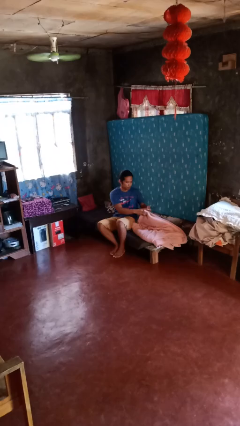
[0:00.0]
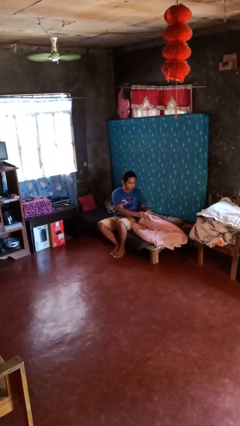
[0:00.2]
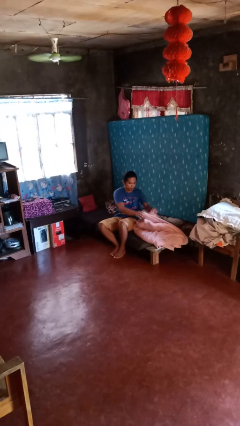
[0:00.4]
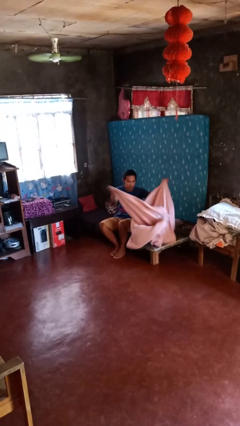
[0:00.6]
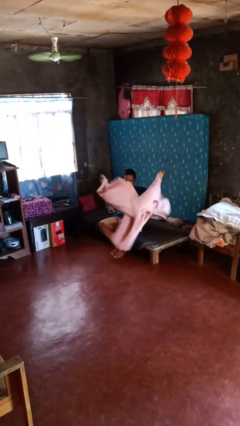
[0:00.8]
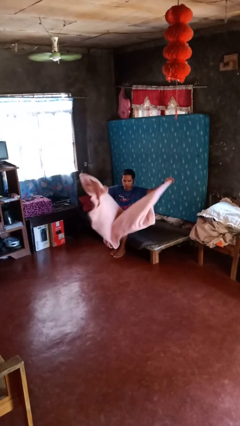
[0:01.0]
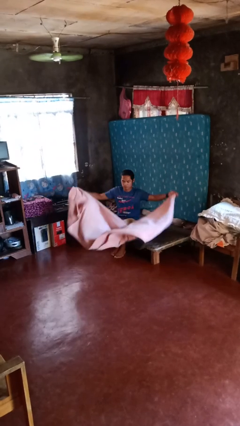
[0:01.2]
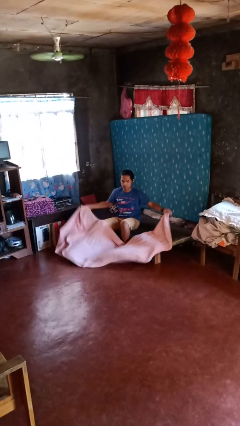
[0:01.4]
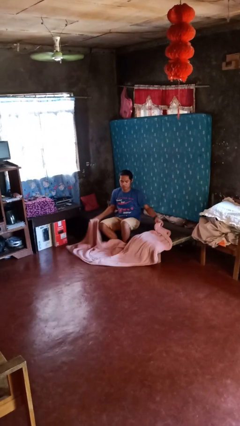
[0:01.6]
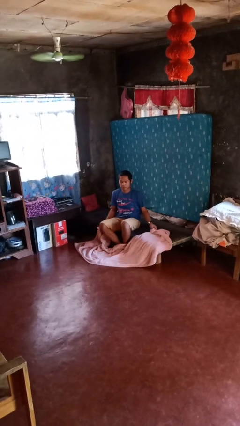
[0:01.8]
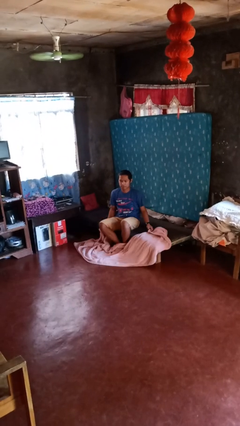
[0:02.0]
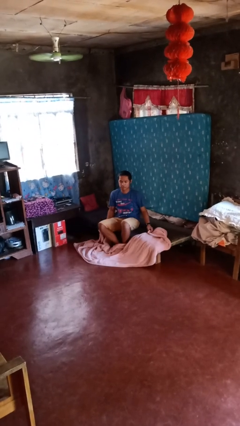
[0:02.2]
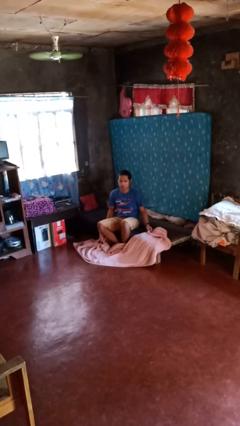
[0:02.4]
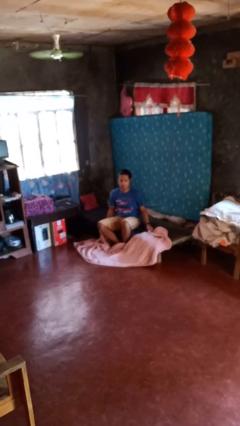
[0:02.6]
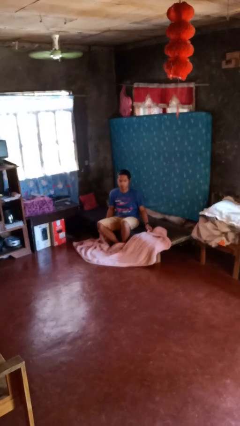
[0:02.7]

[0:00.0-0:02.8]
person unfolds blanket

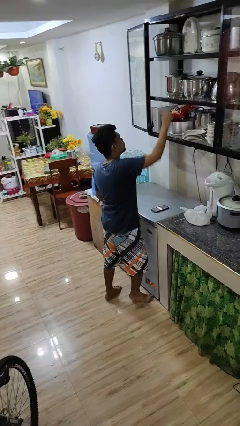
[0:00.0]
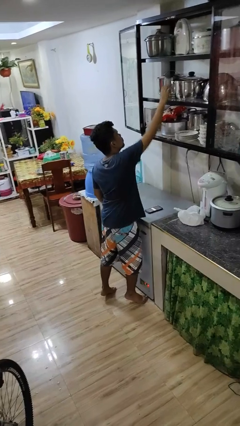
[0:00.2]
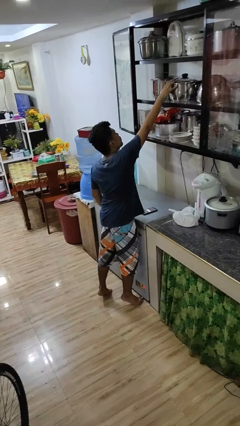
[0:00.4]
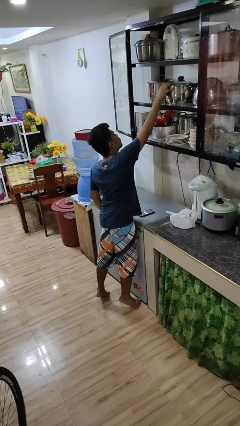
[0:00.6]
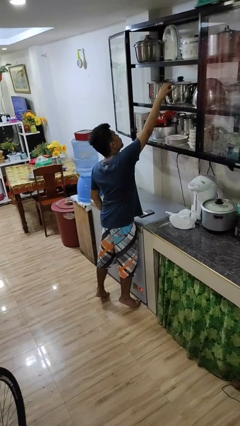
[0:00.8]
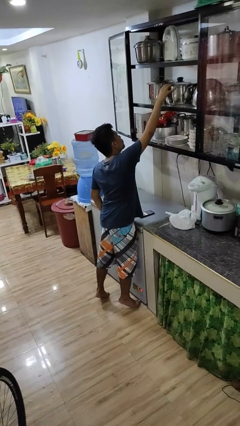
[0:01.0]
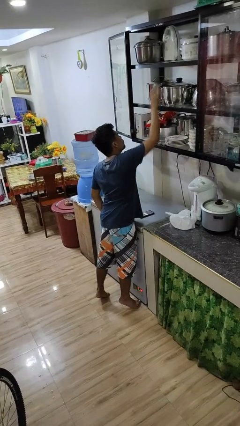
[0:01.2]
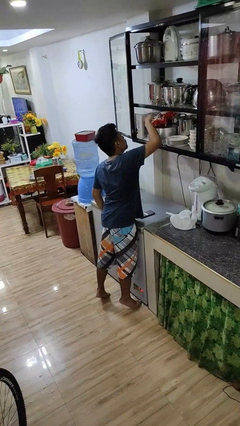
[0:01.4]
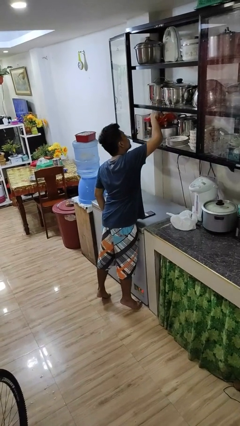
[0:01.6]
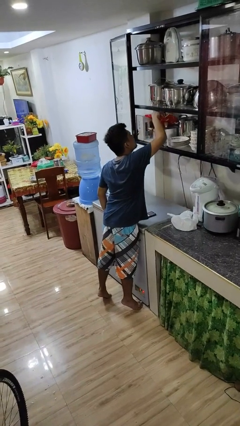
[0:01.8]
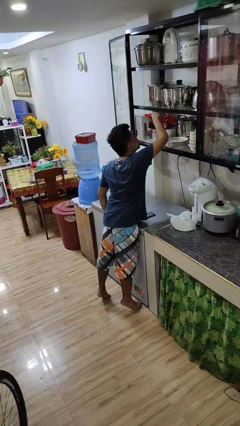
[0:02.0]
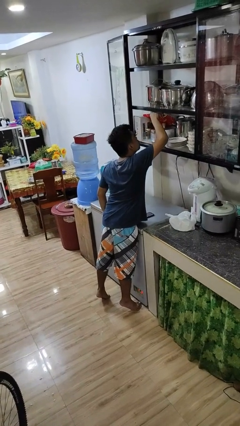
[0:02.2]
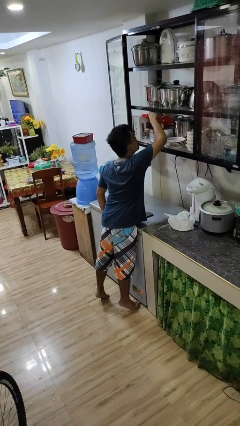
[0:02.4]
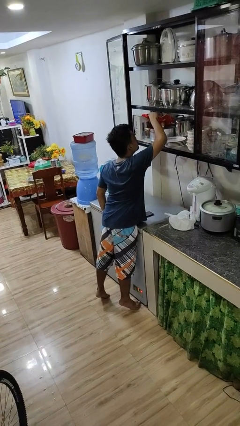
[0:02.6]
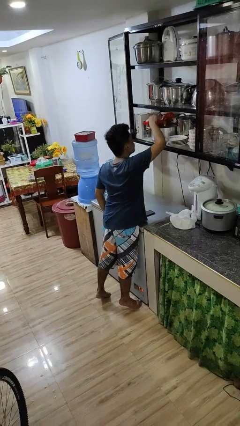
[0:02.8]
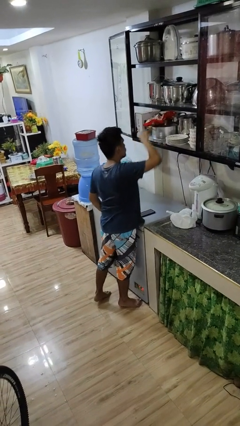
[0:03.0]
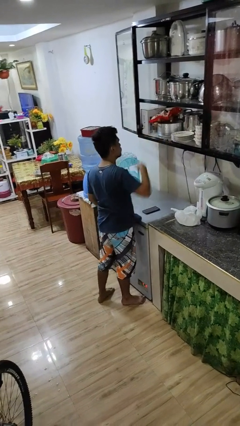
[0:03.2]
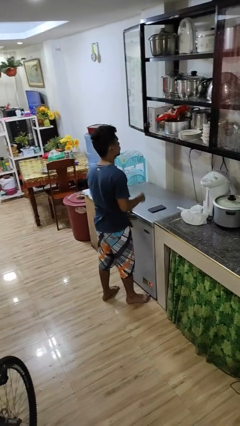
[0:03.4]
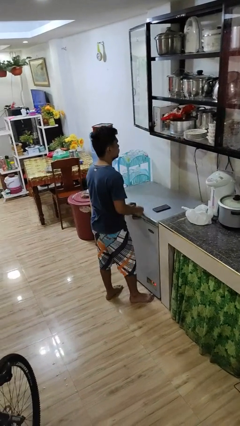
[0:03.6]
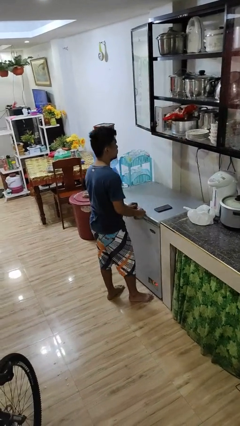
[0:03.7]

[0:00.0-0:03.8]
person searches in cabinet

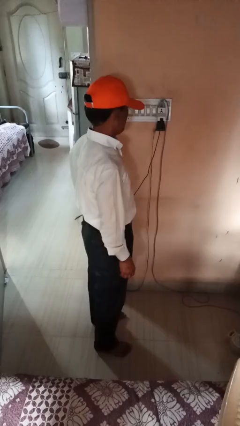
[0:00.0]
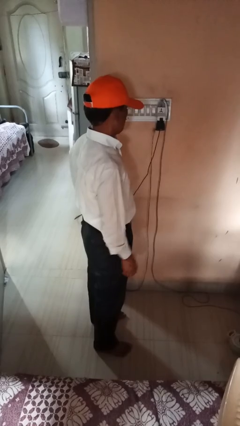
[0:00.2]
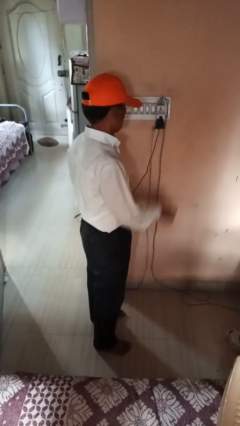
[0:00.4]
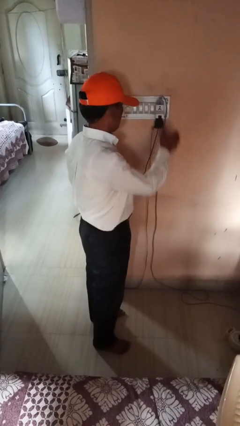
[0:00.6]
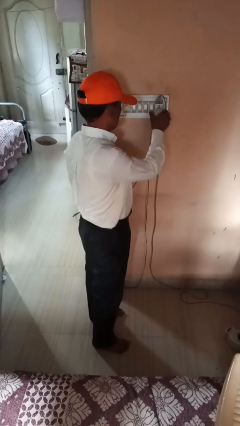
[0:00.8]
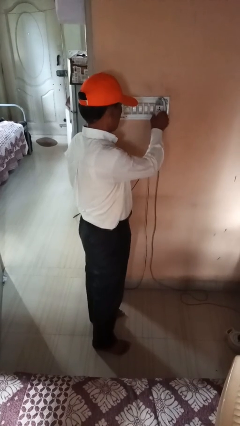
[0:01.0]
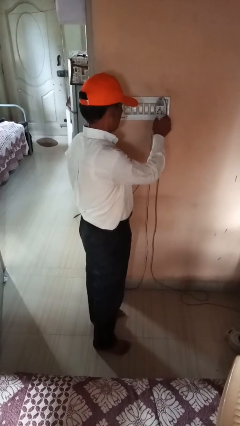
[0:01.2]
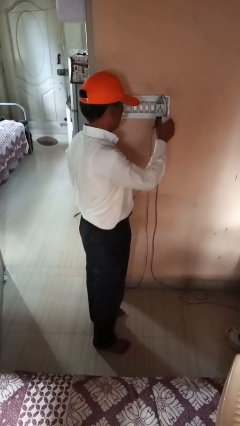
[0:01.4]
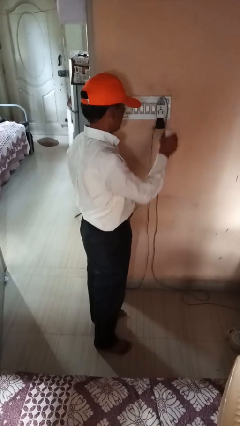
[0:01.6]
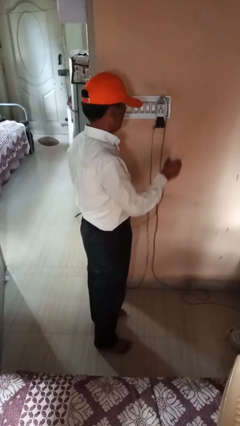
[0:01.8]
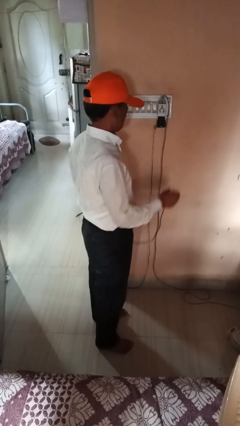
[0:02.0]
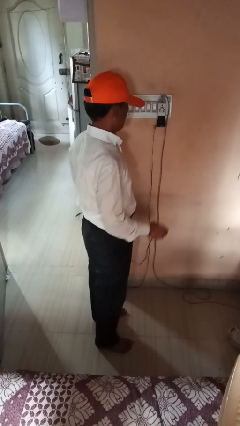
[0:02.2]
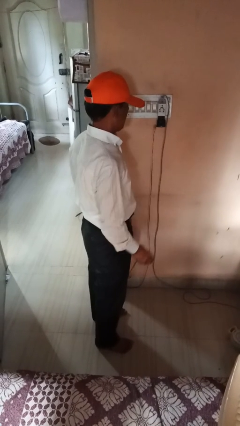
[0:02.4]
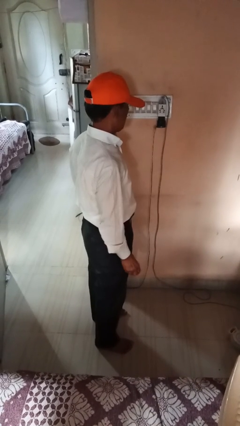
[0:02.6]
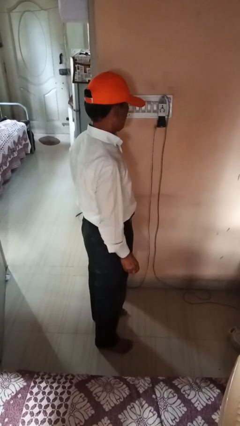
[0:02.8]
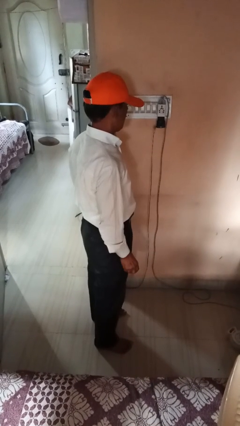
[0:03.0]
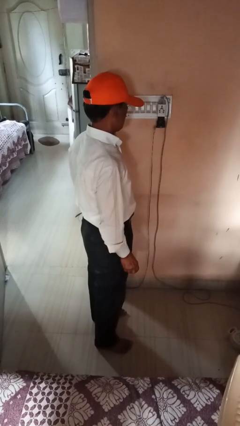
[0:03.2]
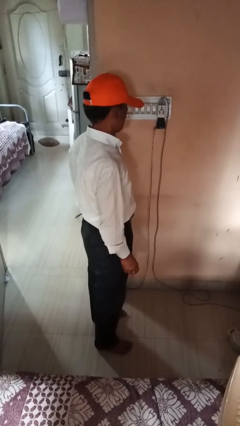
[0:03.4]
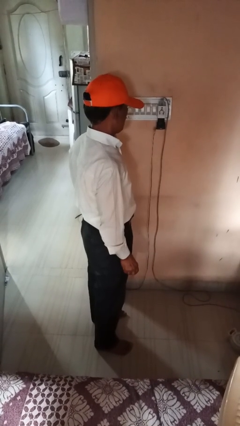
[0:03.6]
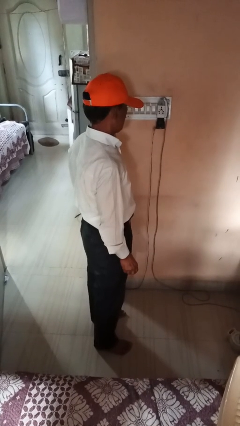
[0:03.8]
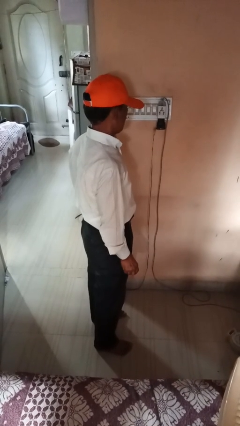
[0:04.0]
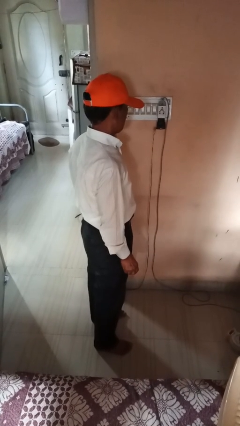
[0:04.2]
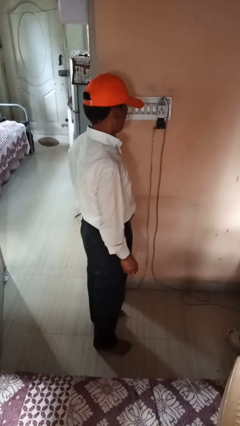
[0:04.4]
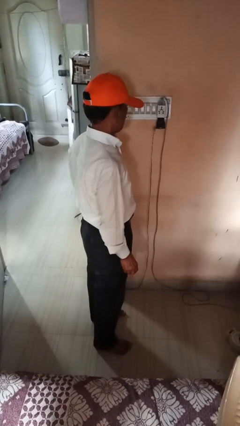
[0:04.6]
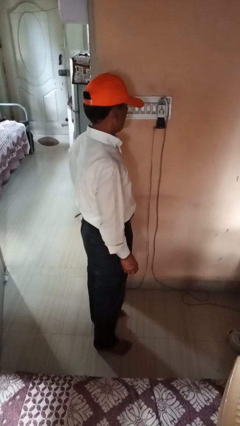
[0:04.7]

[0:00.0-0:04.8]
person unplugs from electrical socket

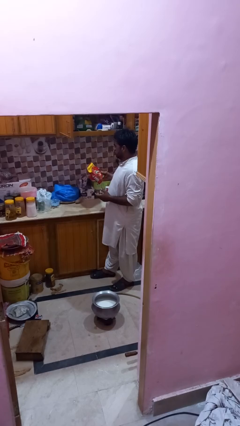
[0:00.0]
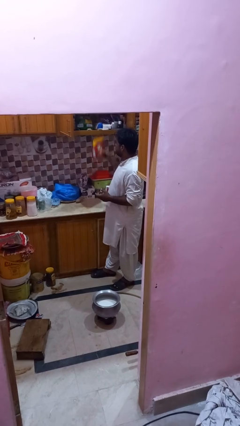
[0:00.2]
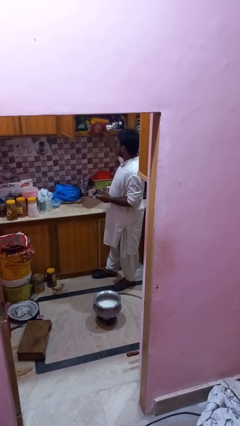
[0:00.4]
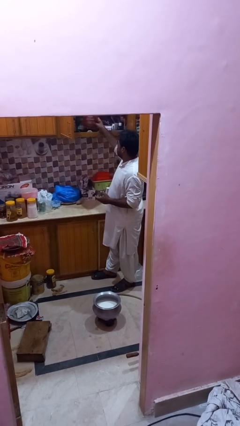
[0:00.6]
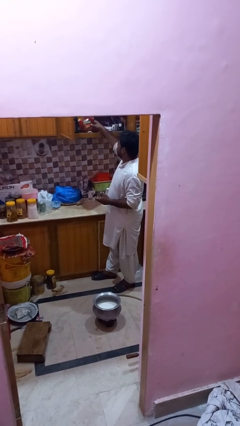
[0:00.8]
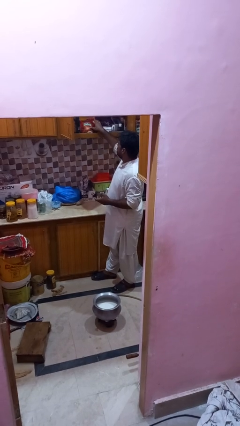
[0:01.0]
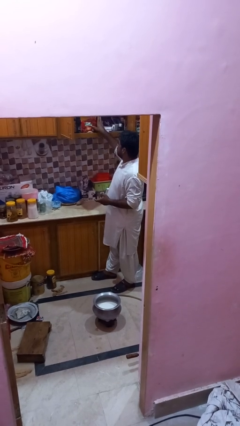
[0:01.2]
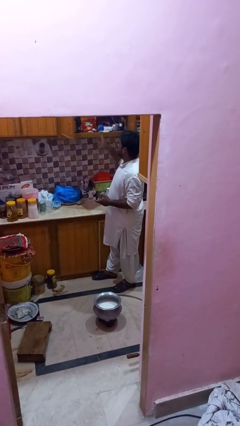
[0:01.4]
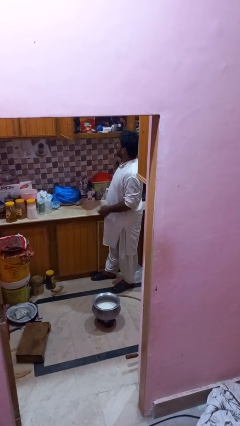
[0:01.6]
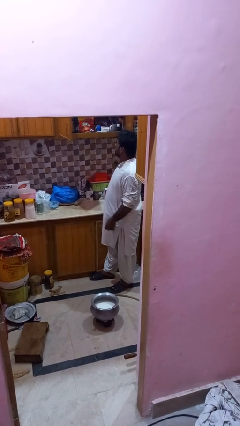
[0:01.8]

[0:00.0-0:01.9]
person puts down object into cabinet

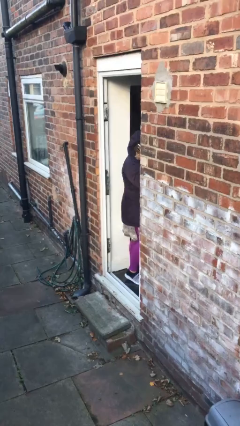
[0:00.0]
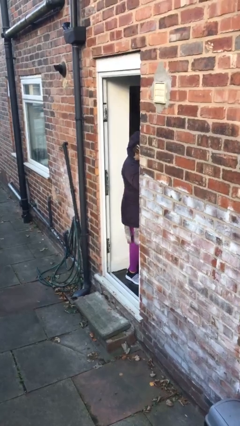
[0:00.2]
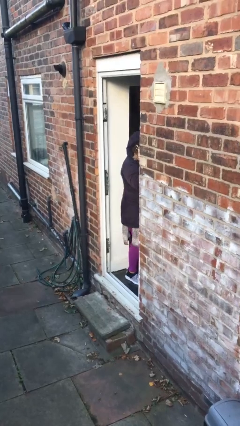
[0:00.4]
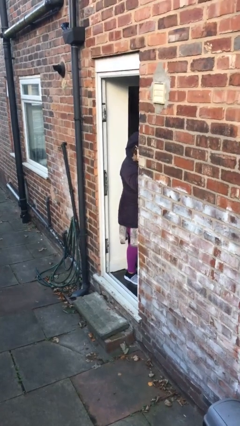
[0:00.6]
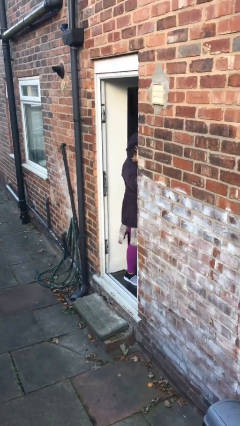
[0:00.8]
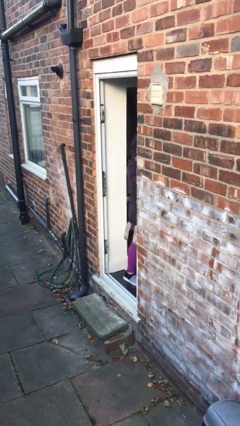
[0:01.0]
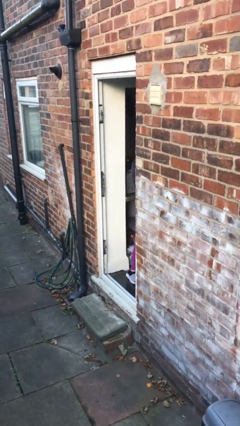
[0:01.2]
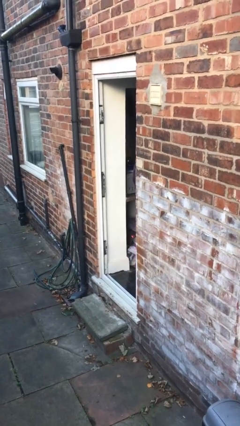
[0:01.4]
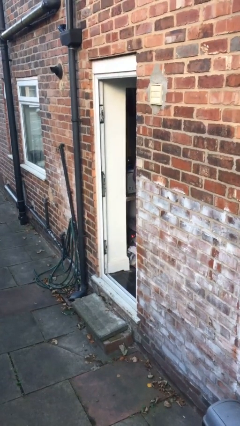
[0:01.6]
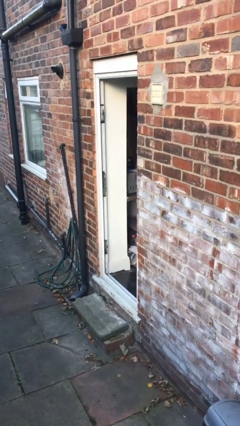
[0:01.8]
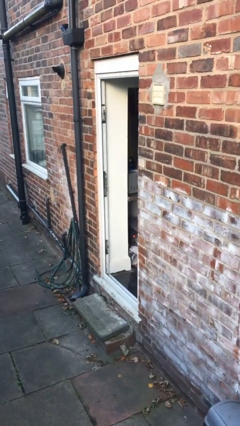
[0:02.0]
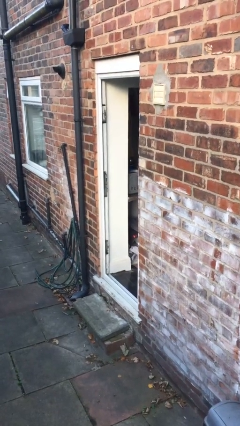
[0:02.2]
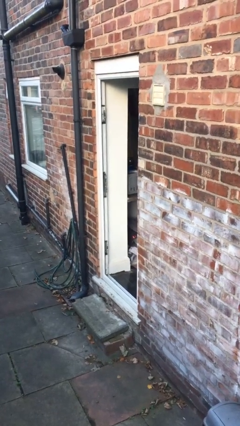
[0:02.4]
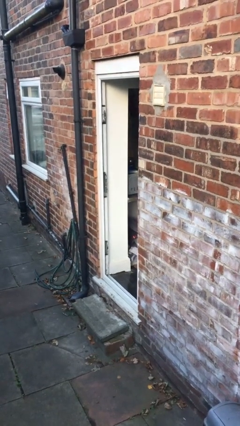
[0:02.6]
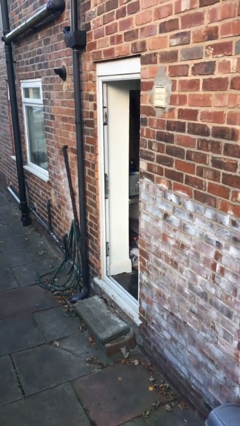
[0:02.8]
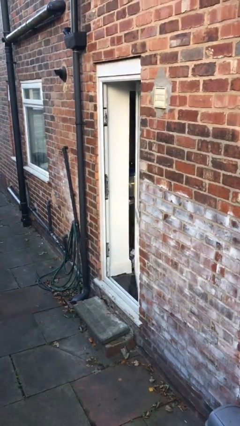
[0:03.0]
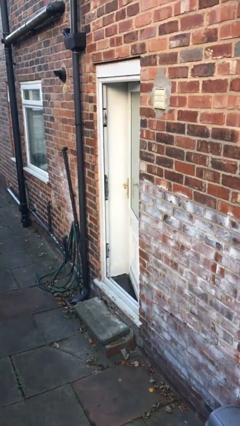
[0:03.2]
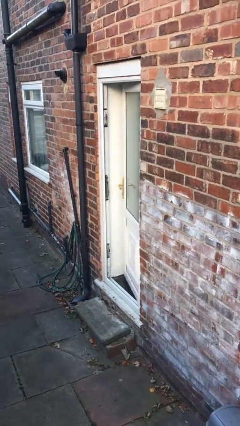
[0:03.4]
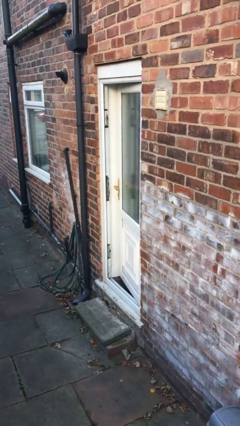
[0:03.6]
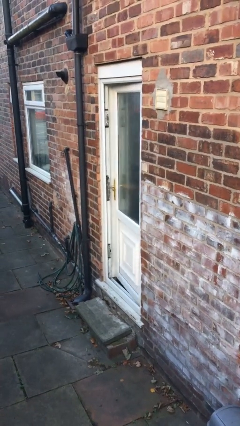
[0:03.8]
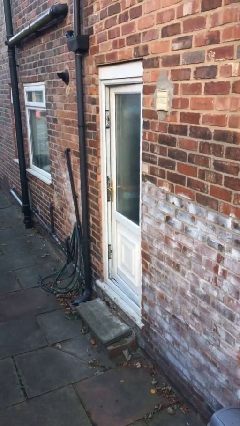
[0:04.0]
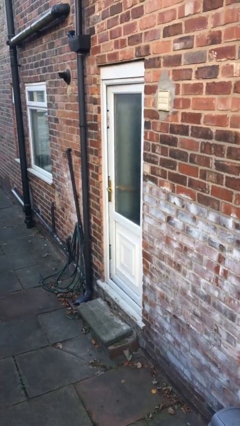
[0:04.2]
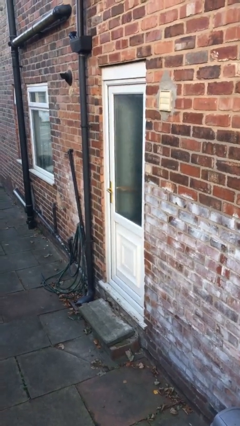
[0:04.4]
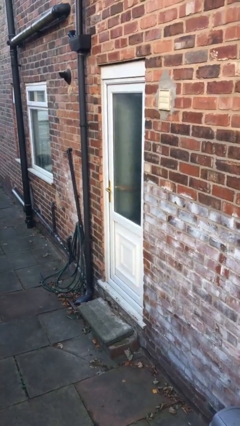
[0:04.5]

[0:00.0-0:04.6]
person closes facility door
